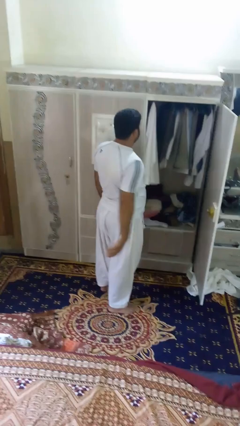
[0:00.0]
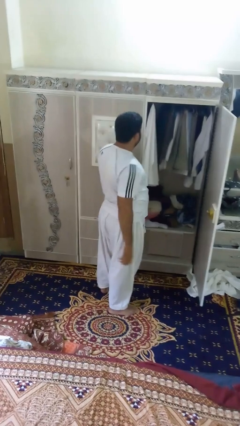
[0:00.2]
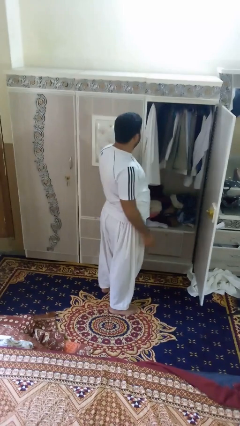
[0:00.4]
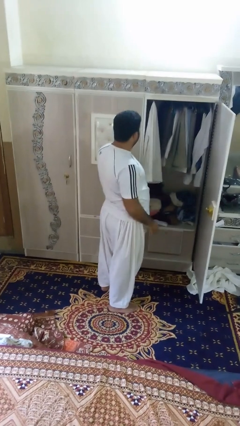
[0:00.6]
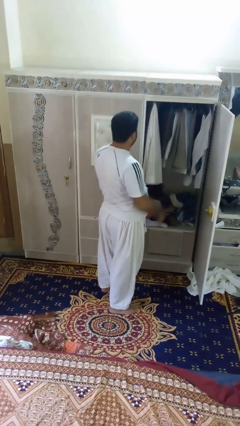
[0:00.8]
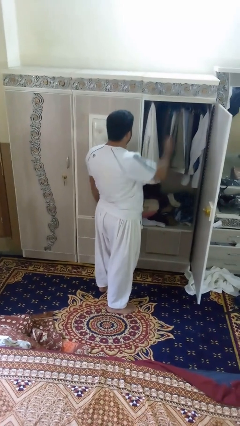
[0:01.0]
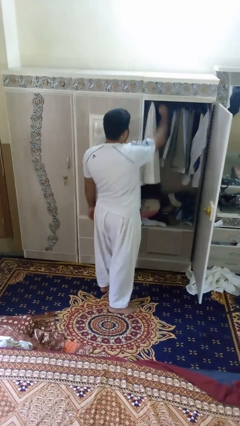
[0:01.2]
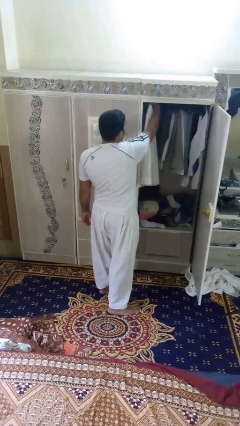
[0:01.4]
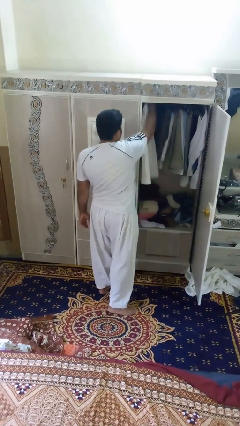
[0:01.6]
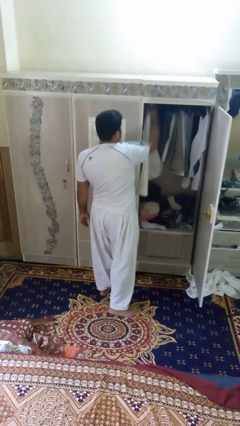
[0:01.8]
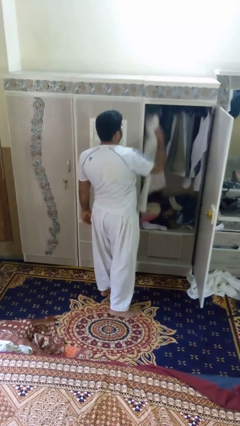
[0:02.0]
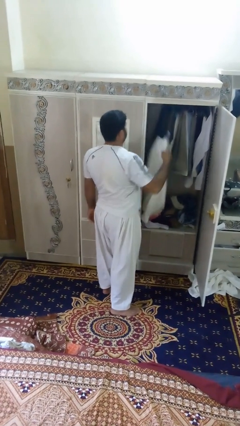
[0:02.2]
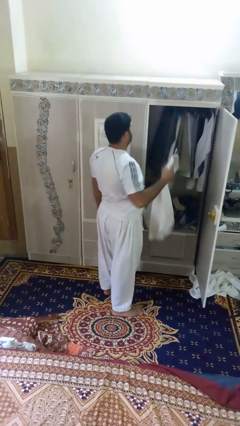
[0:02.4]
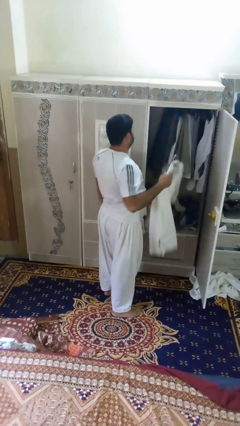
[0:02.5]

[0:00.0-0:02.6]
person takes clothes from closet

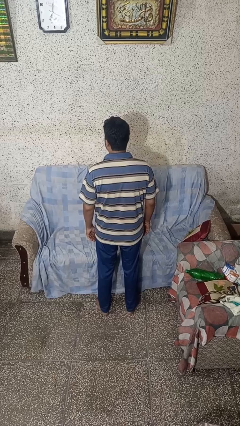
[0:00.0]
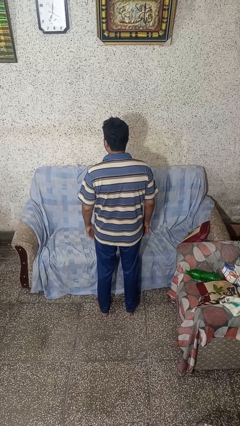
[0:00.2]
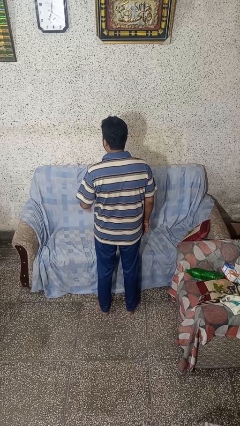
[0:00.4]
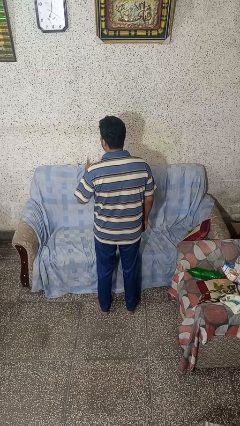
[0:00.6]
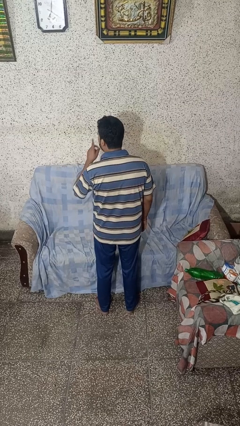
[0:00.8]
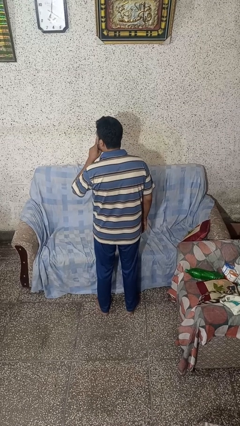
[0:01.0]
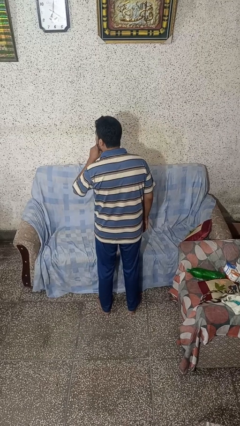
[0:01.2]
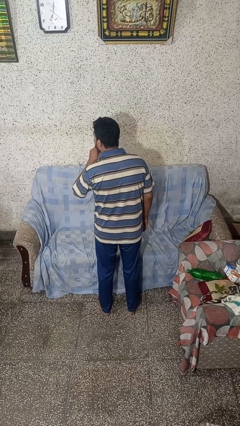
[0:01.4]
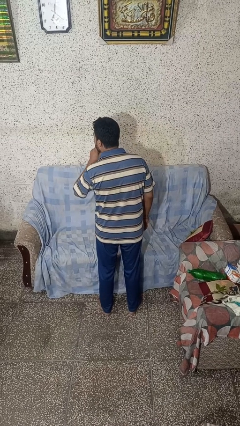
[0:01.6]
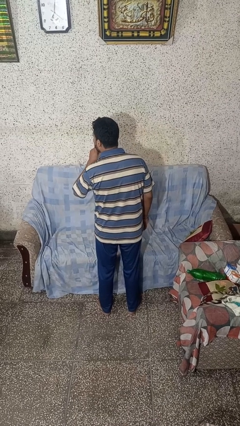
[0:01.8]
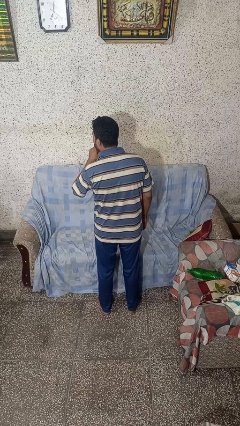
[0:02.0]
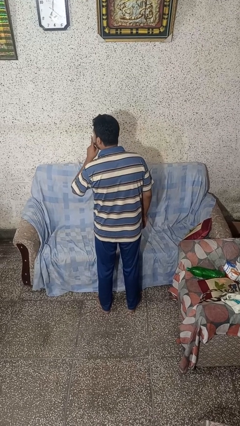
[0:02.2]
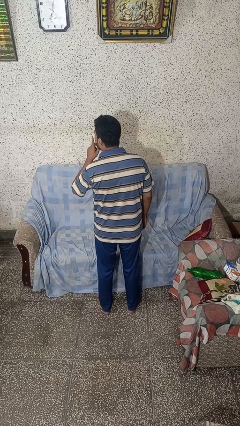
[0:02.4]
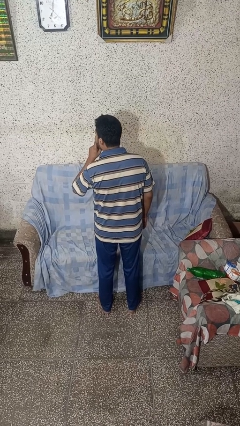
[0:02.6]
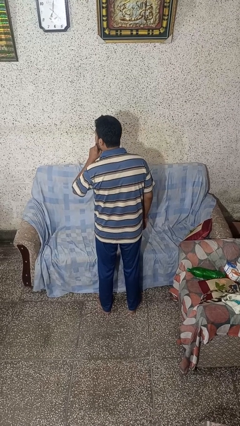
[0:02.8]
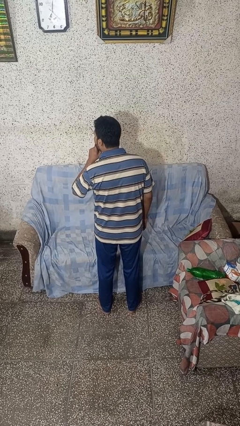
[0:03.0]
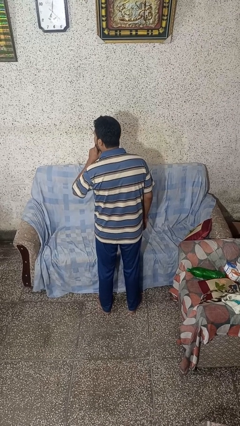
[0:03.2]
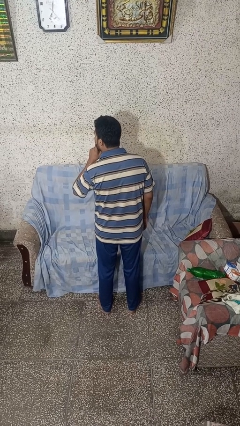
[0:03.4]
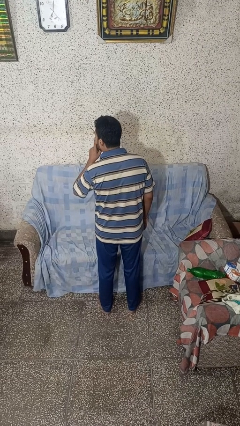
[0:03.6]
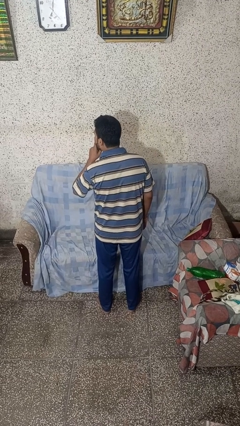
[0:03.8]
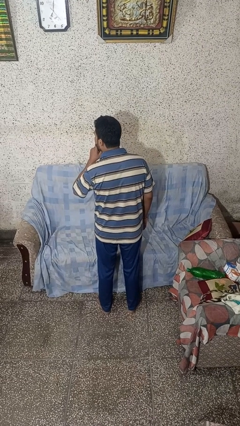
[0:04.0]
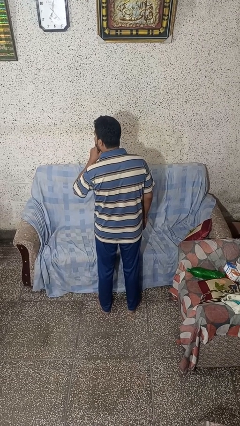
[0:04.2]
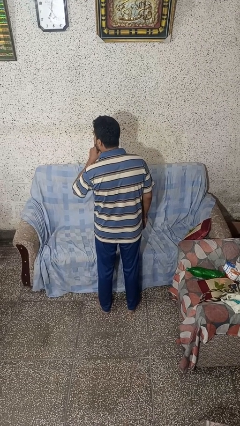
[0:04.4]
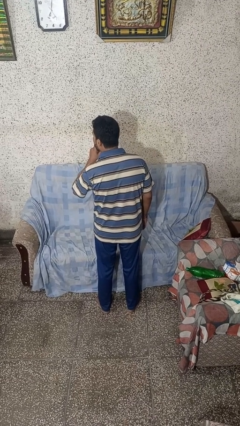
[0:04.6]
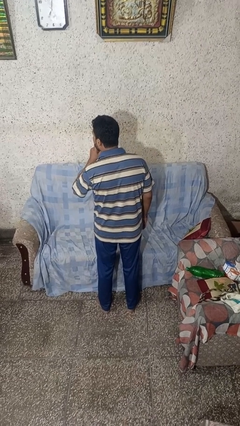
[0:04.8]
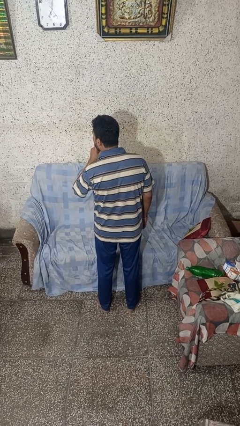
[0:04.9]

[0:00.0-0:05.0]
person gestures be quiet

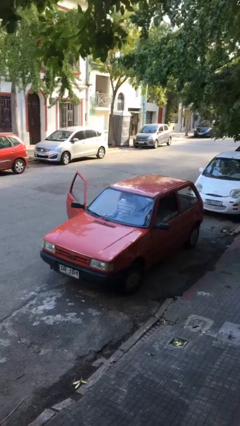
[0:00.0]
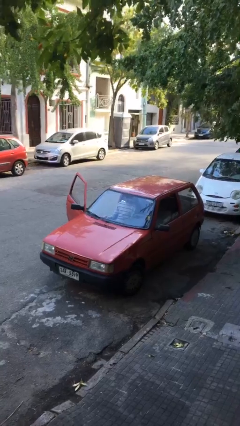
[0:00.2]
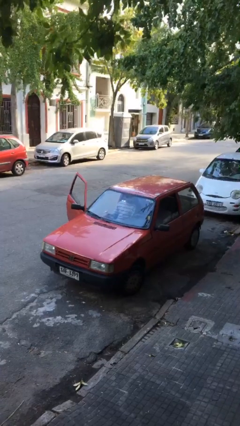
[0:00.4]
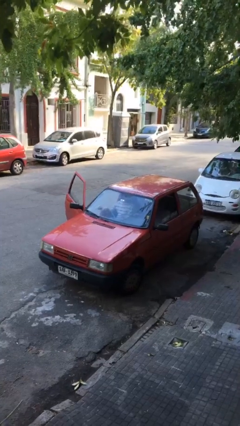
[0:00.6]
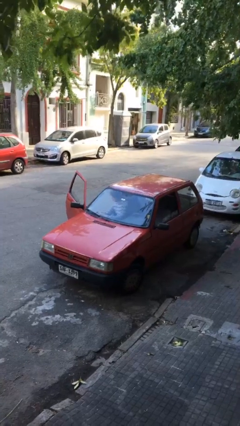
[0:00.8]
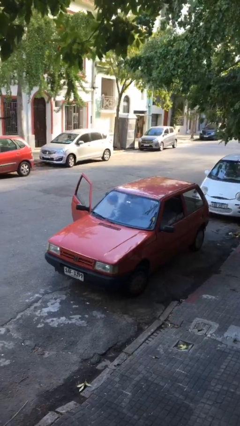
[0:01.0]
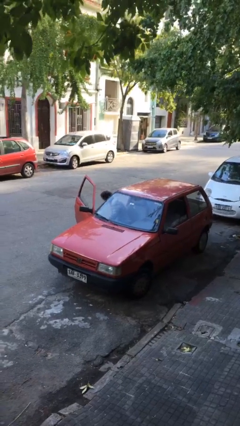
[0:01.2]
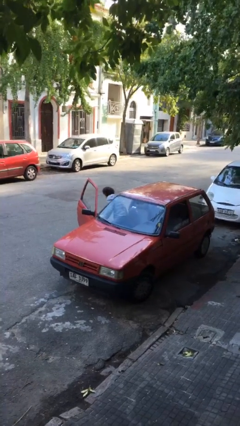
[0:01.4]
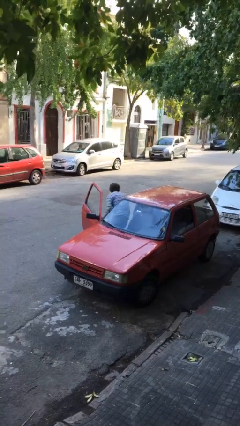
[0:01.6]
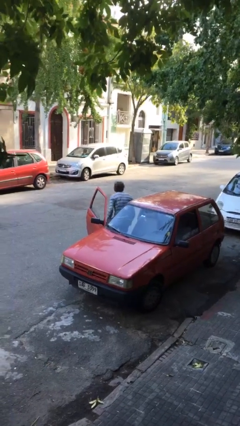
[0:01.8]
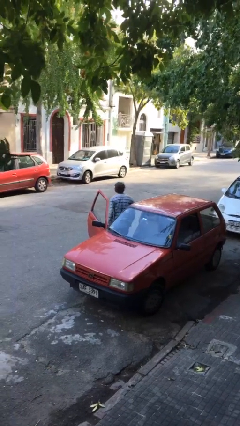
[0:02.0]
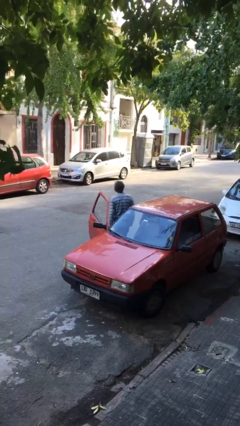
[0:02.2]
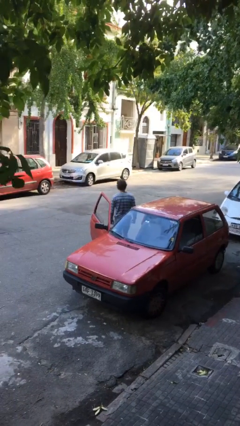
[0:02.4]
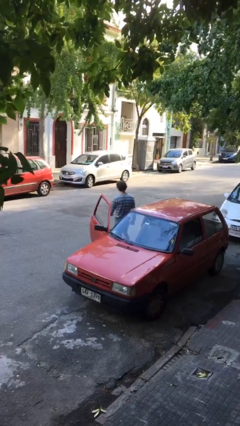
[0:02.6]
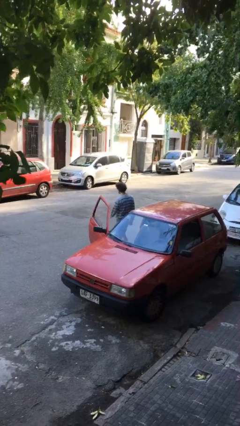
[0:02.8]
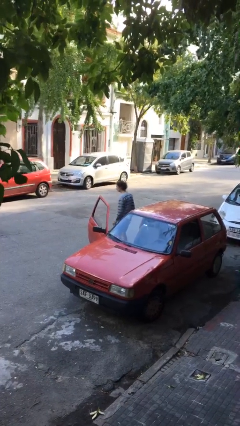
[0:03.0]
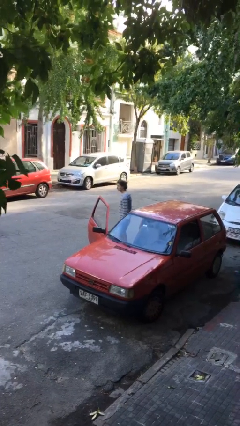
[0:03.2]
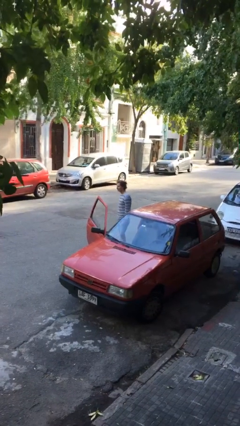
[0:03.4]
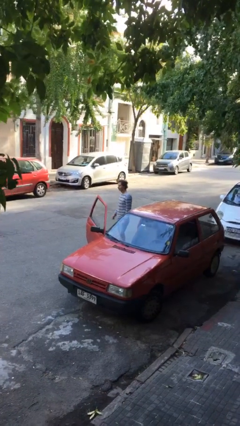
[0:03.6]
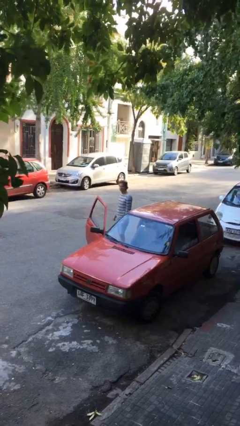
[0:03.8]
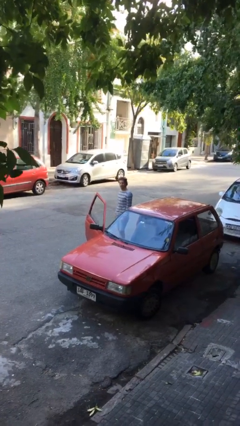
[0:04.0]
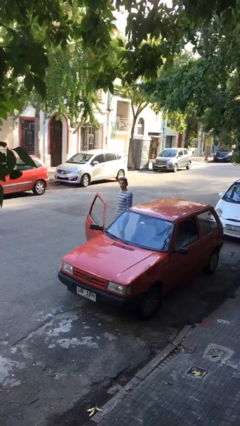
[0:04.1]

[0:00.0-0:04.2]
person exits car

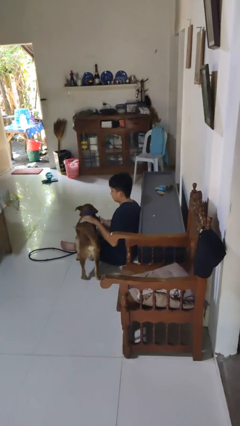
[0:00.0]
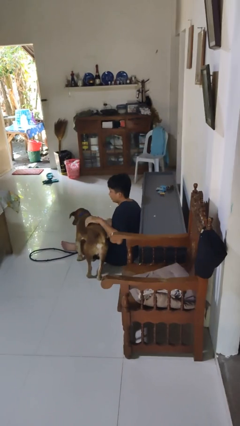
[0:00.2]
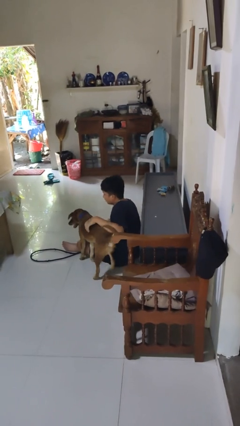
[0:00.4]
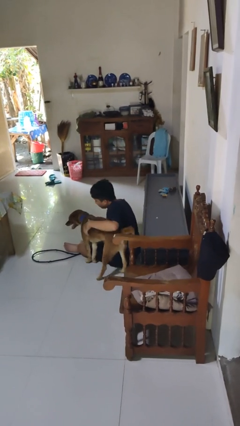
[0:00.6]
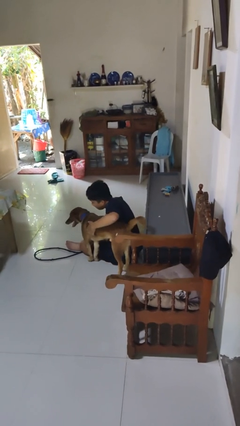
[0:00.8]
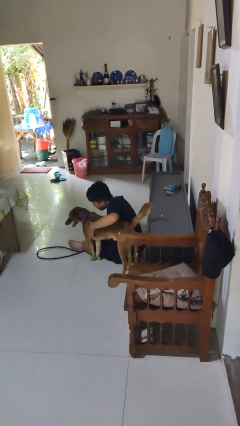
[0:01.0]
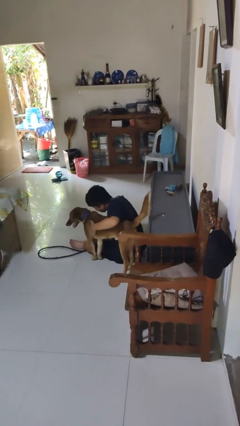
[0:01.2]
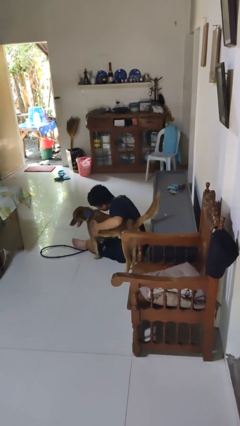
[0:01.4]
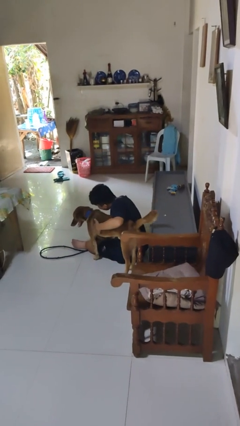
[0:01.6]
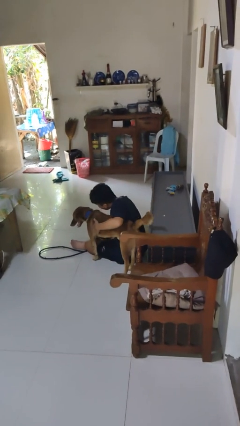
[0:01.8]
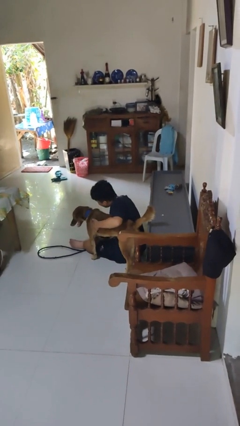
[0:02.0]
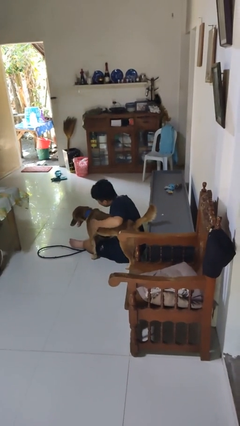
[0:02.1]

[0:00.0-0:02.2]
person hugs dog

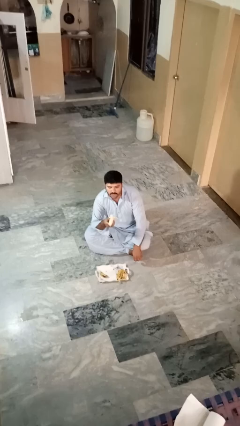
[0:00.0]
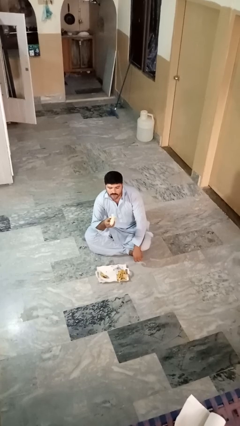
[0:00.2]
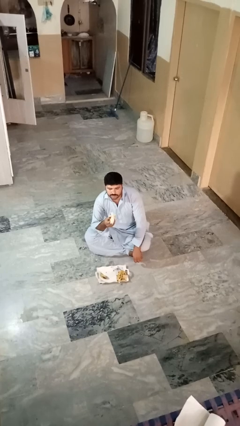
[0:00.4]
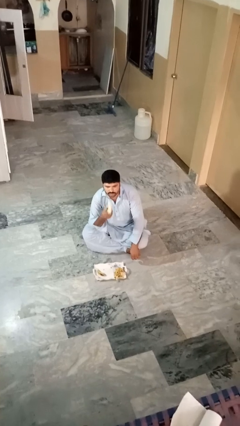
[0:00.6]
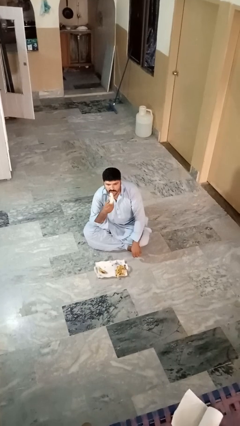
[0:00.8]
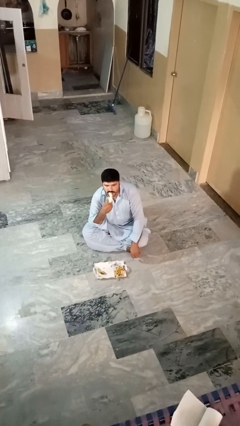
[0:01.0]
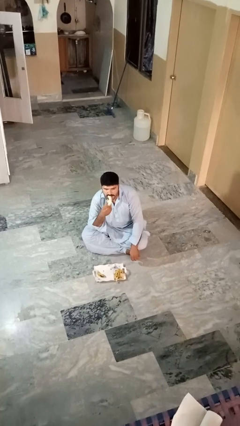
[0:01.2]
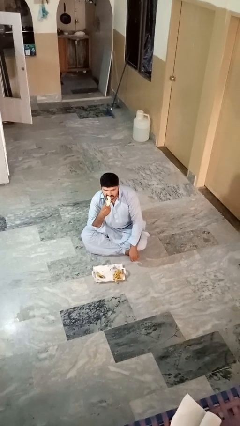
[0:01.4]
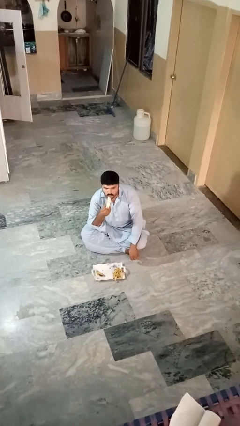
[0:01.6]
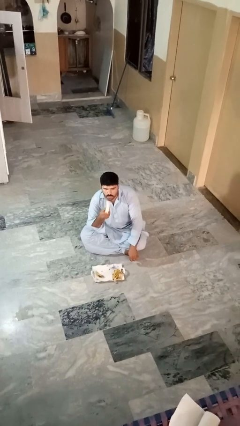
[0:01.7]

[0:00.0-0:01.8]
person eats banana

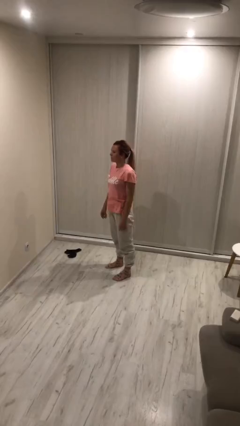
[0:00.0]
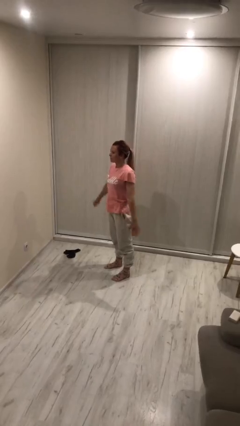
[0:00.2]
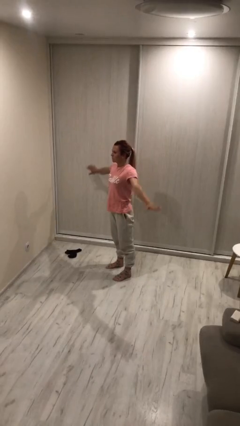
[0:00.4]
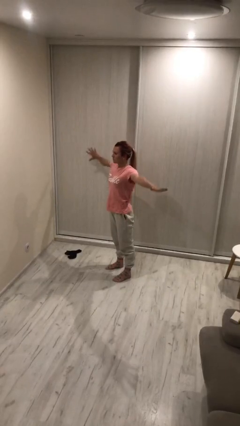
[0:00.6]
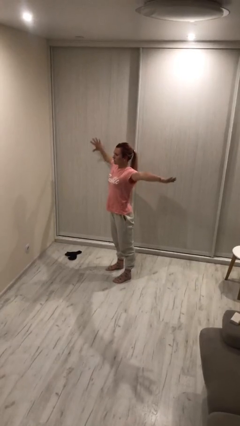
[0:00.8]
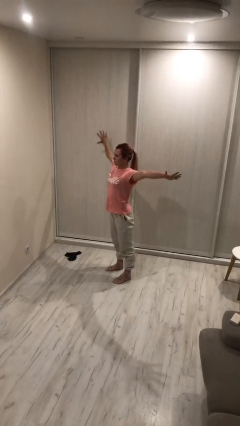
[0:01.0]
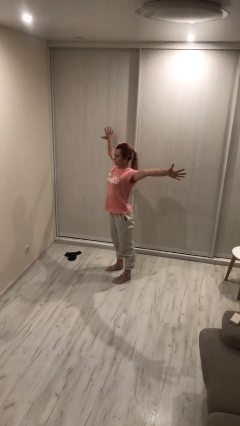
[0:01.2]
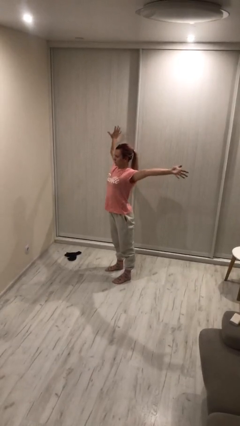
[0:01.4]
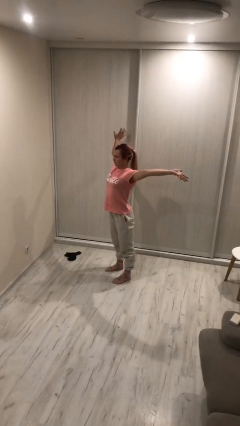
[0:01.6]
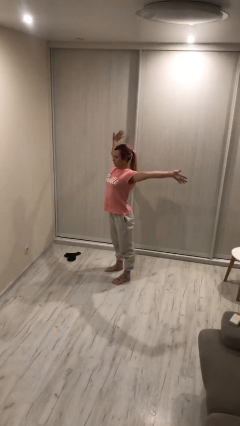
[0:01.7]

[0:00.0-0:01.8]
person stretches arms to side
